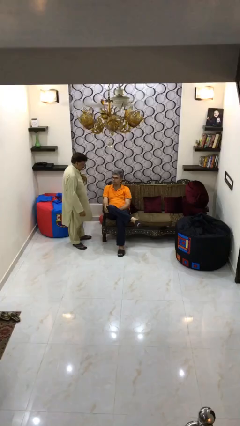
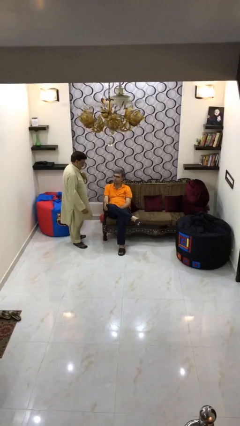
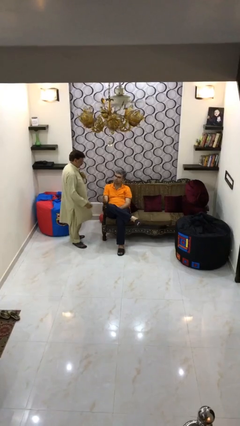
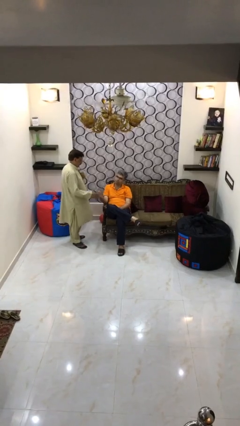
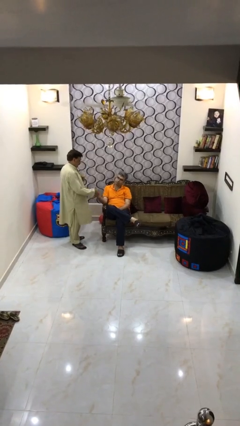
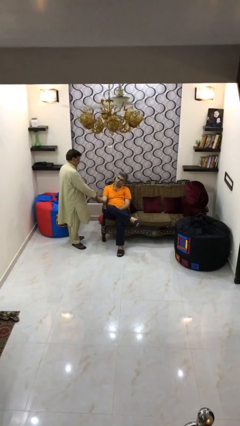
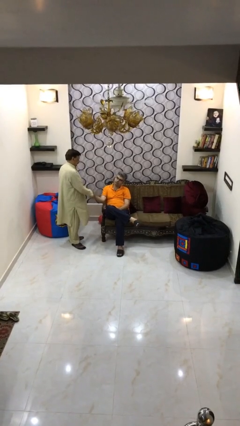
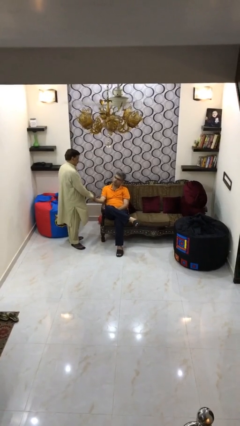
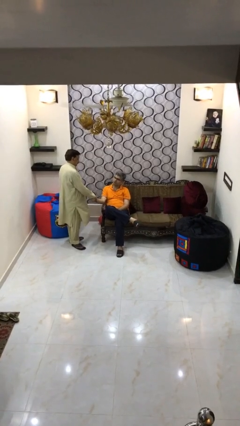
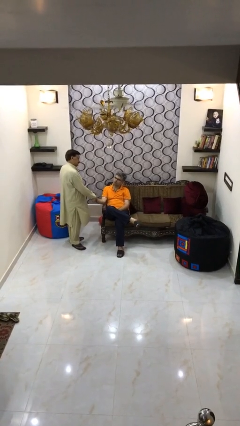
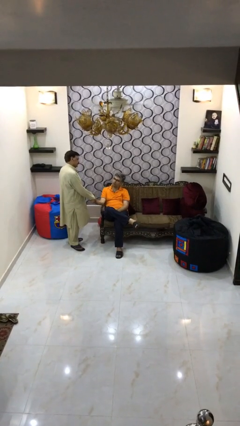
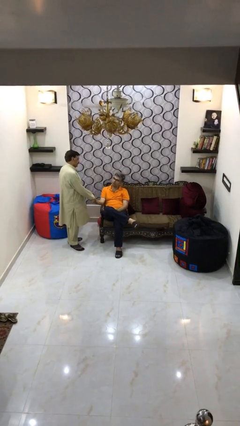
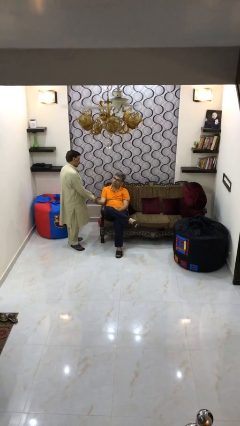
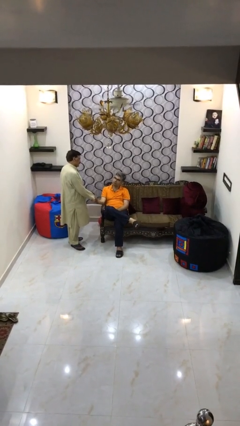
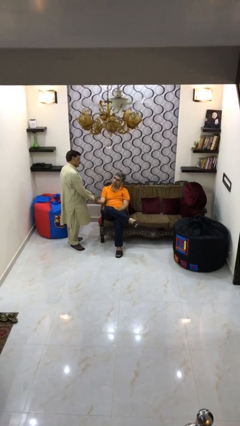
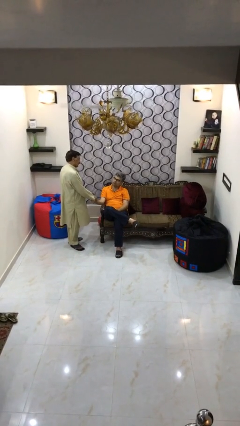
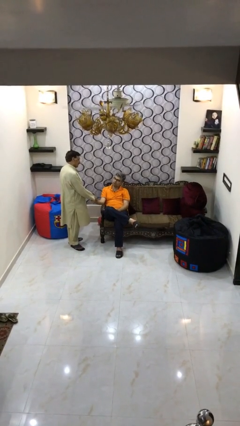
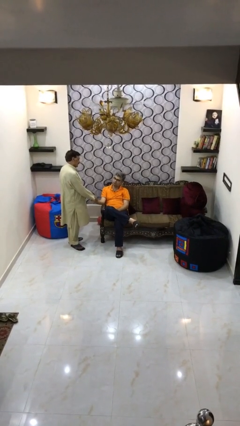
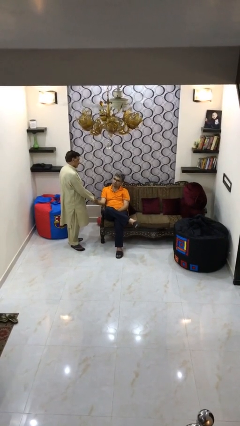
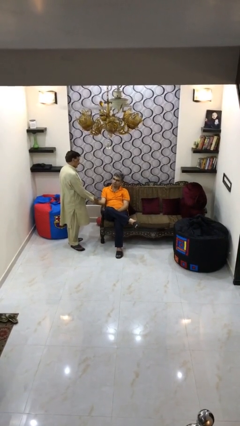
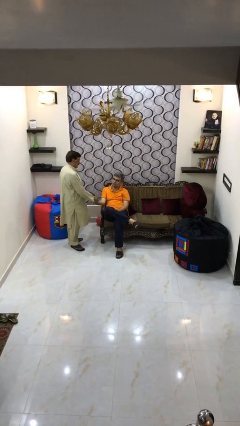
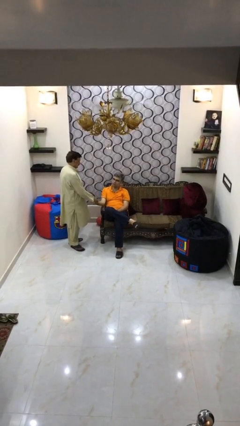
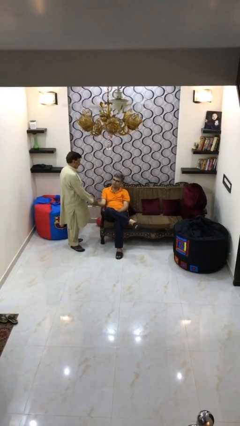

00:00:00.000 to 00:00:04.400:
person shakes hand

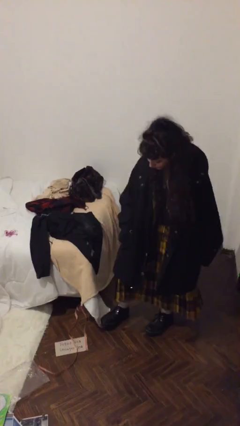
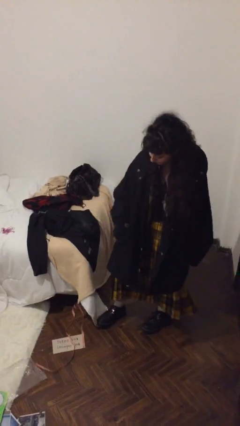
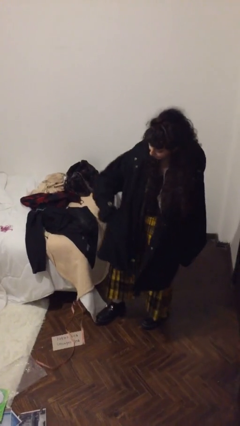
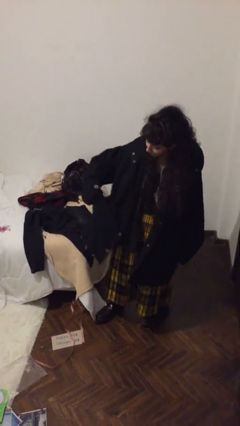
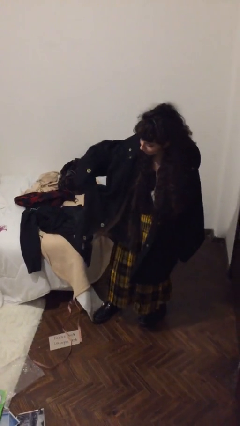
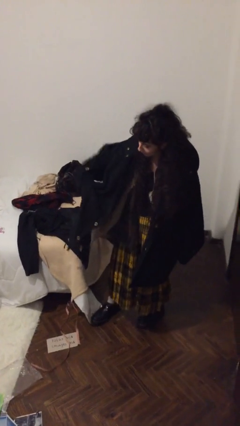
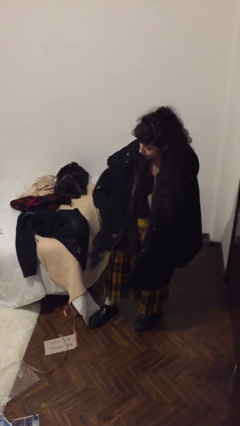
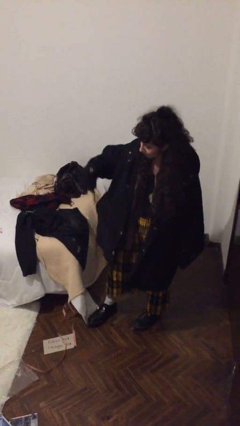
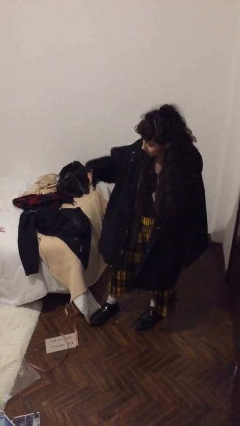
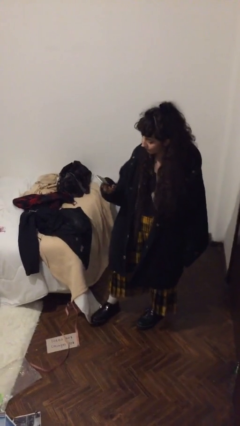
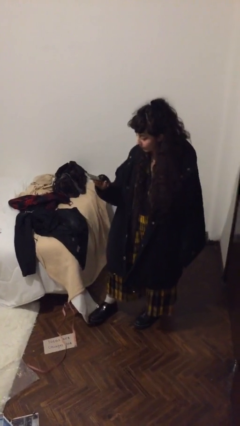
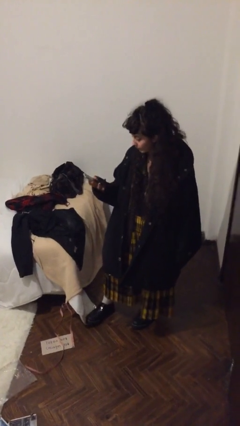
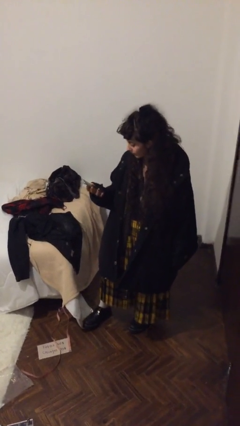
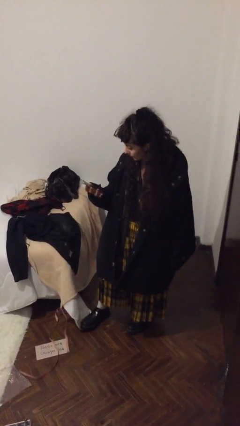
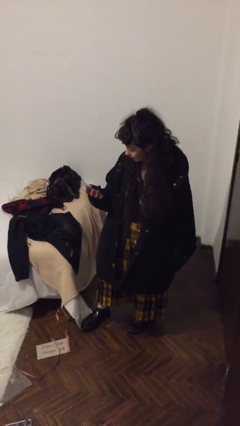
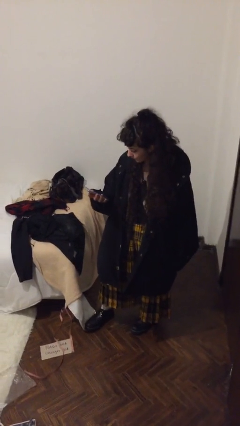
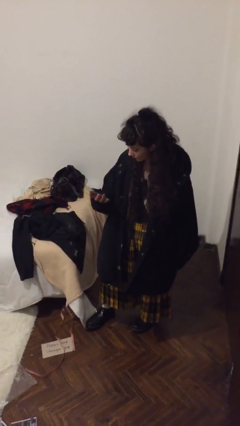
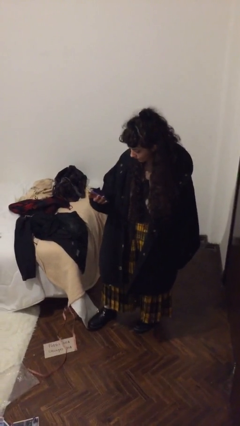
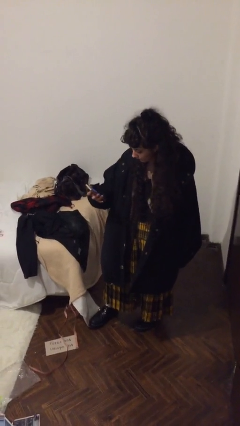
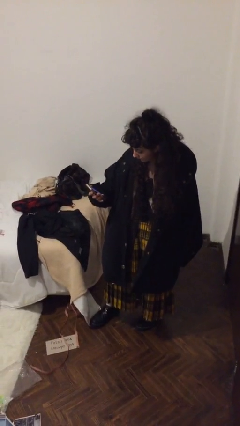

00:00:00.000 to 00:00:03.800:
person takes phone from pocket

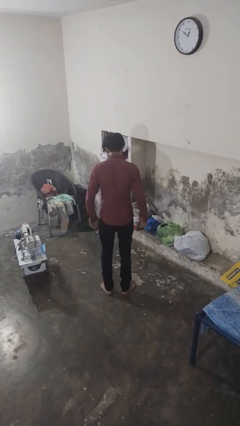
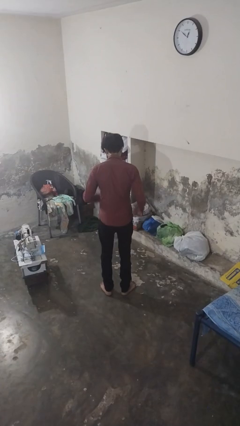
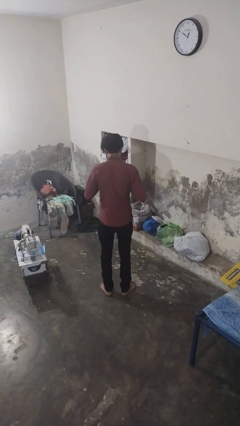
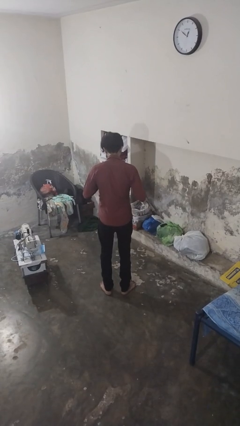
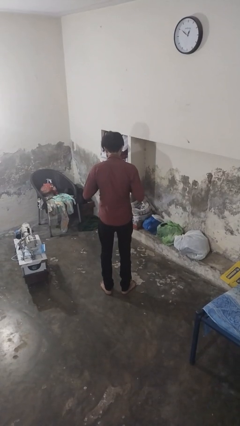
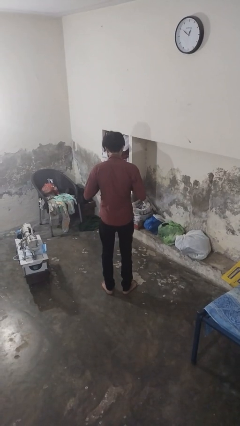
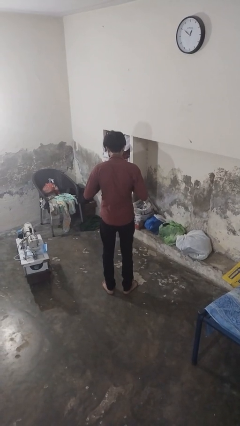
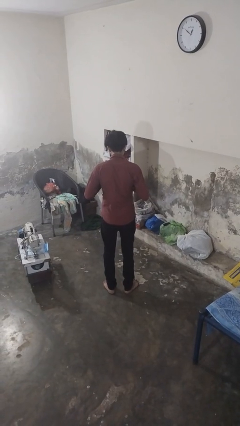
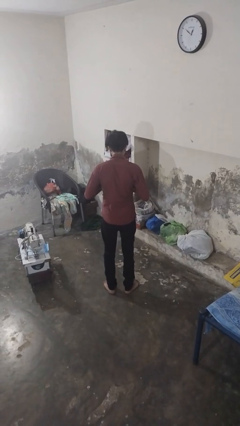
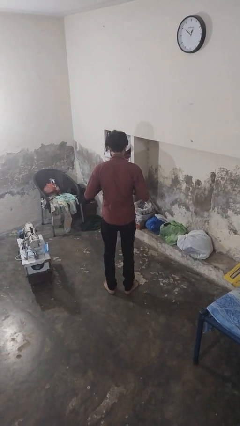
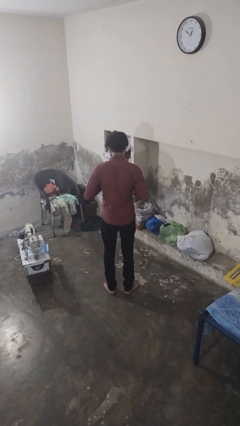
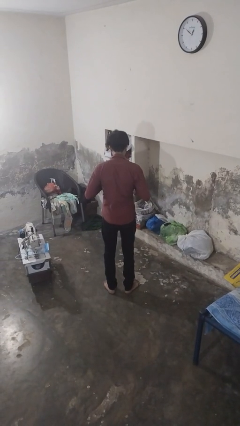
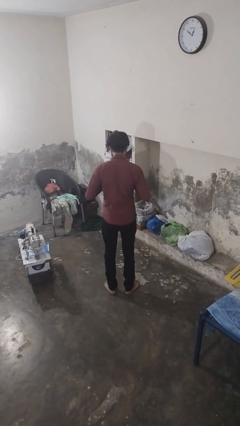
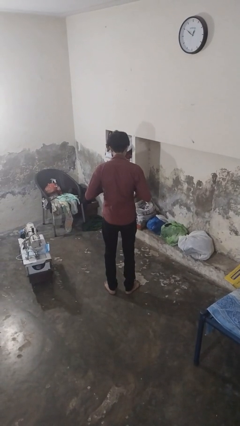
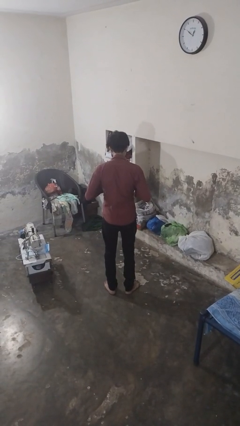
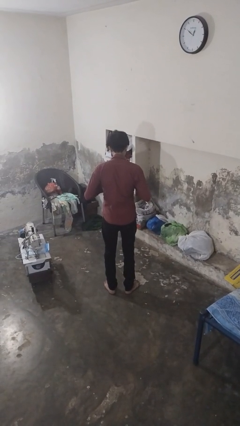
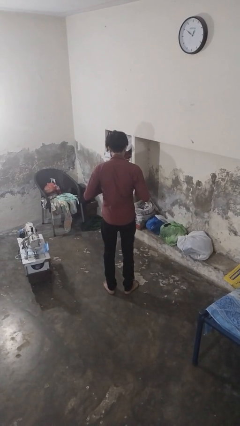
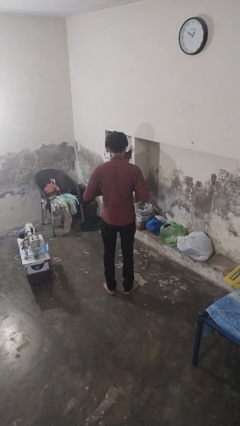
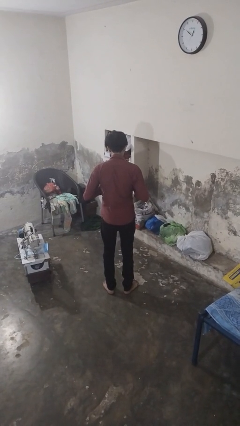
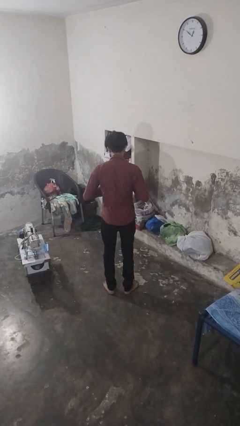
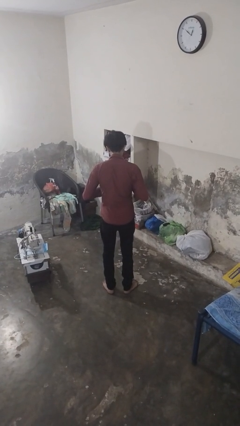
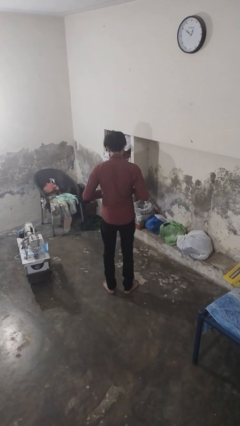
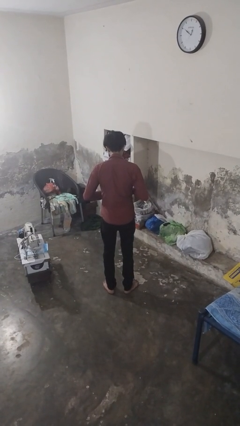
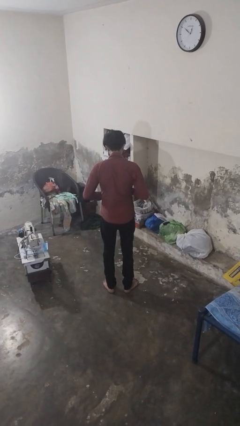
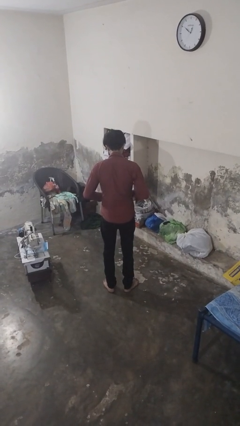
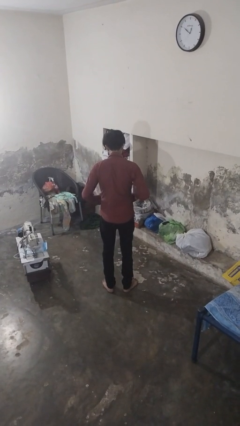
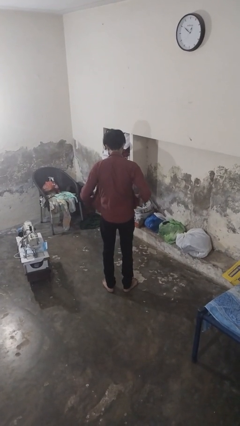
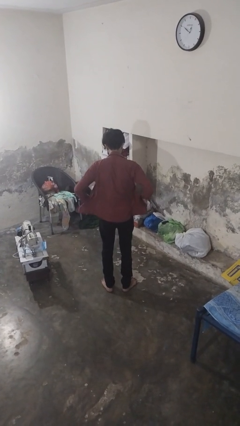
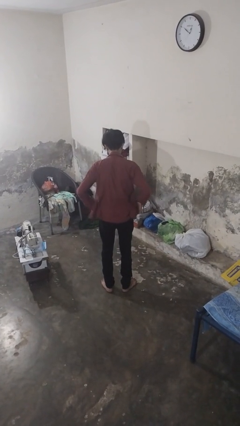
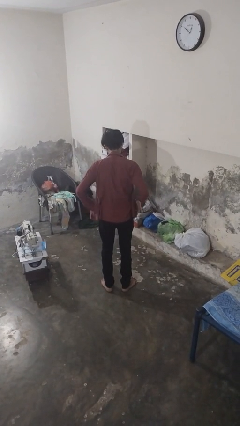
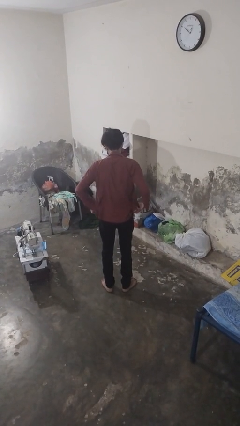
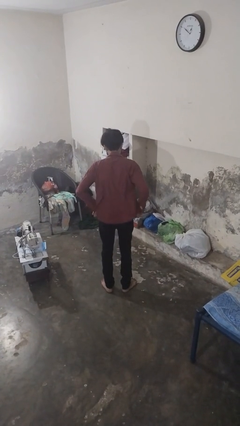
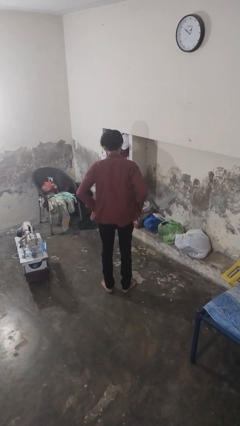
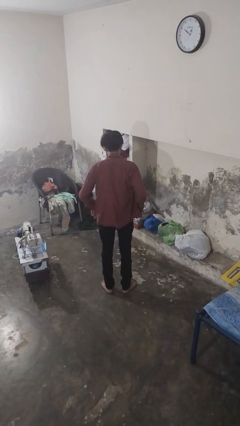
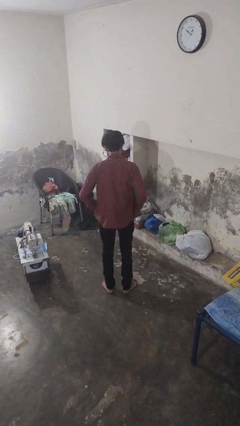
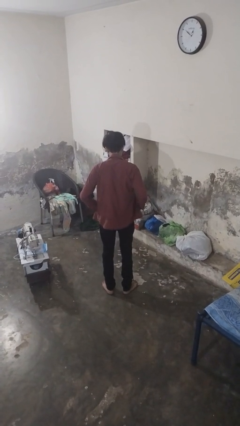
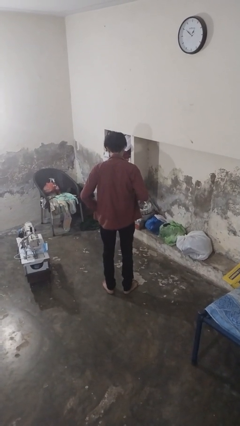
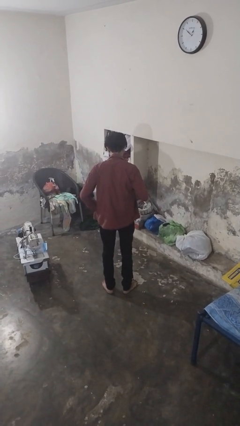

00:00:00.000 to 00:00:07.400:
person unbuttons shirt

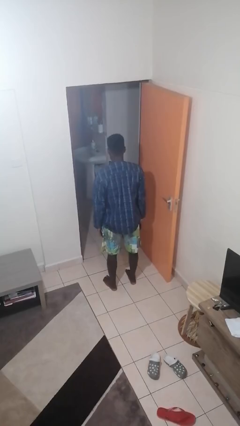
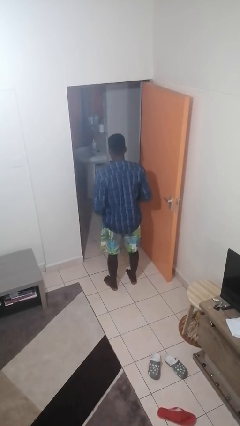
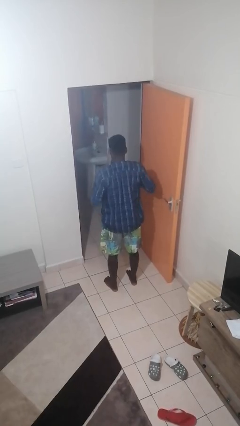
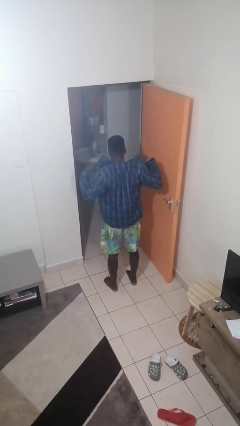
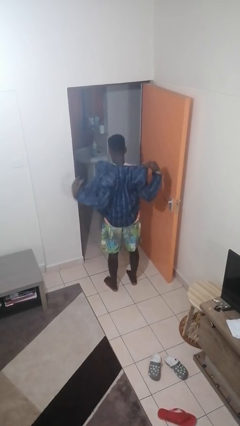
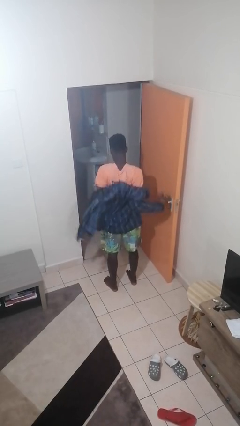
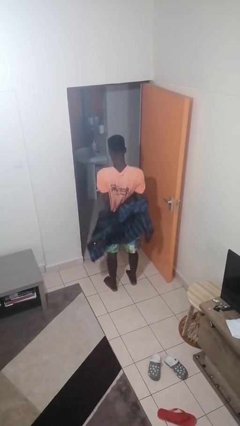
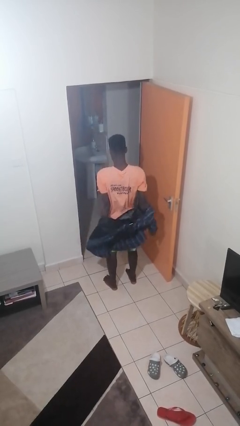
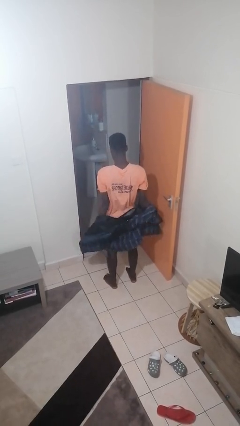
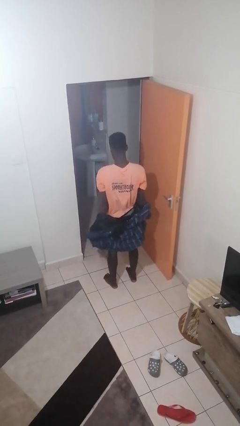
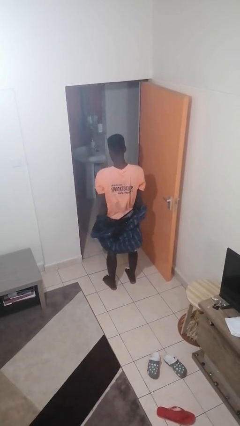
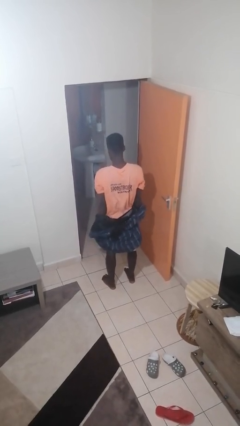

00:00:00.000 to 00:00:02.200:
person takes off jacket
